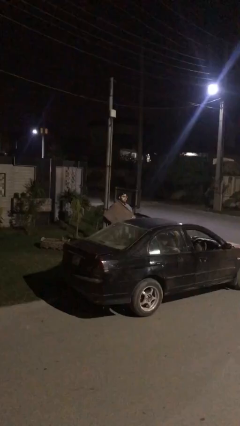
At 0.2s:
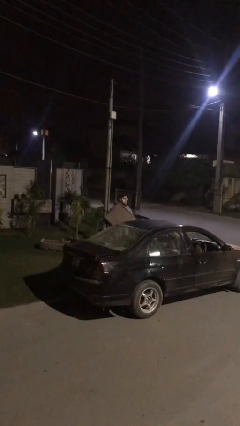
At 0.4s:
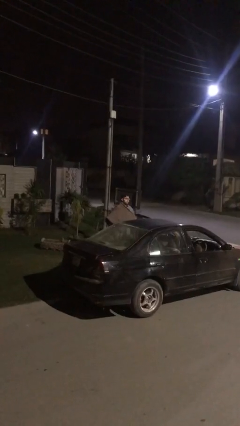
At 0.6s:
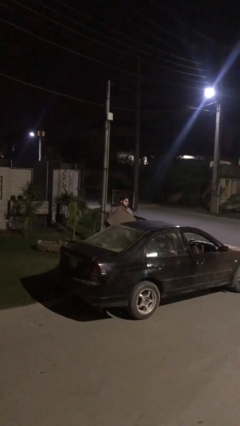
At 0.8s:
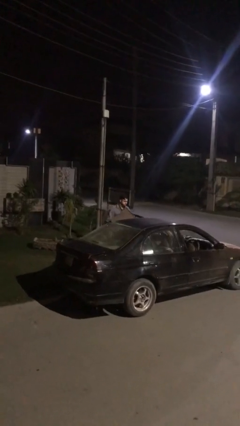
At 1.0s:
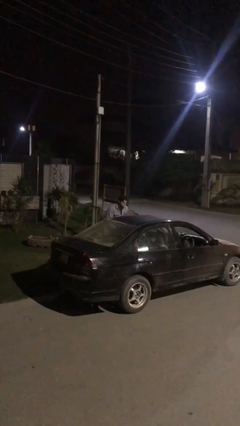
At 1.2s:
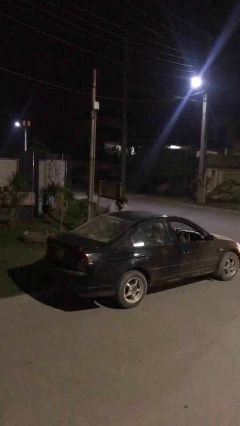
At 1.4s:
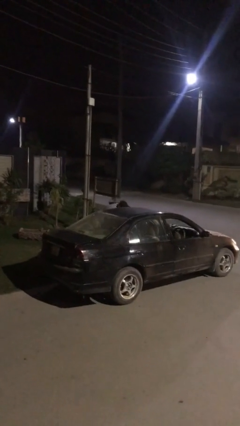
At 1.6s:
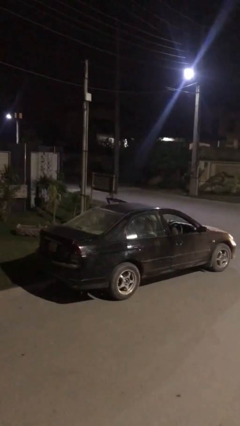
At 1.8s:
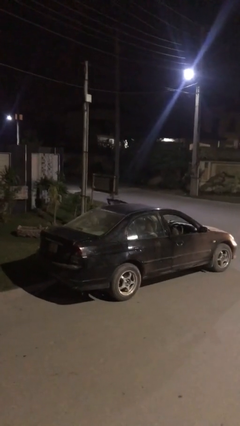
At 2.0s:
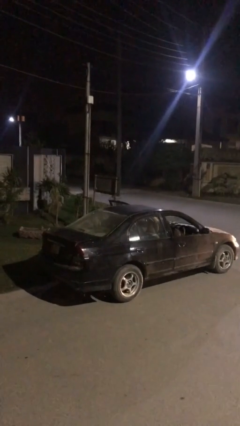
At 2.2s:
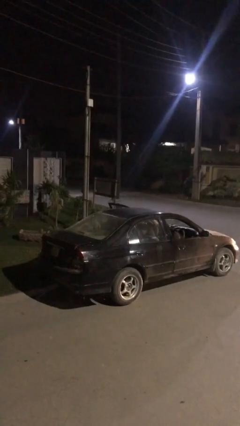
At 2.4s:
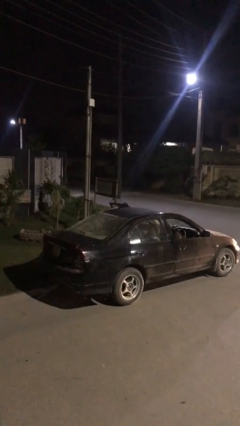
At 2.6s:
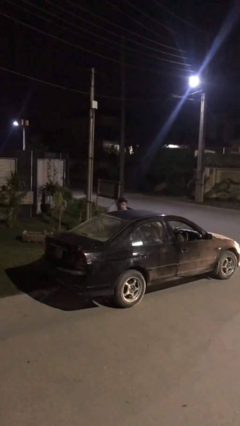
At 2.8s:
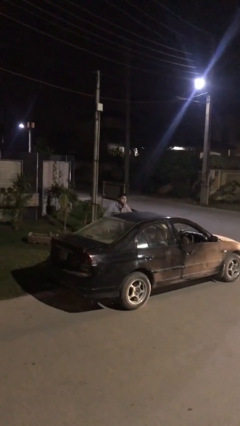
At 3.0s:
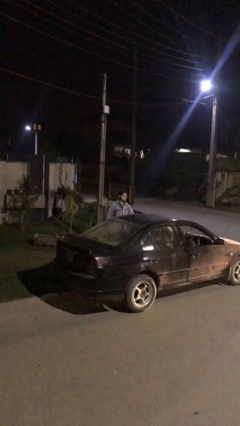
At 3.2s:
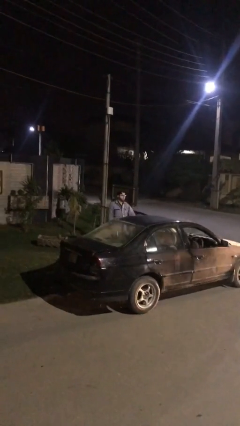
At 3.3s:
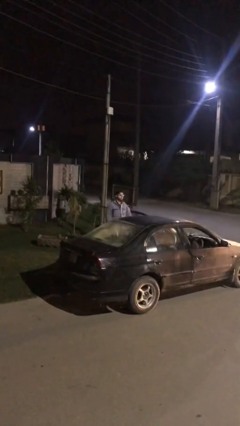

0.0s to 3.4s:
person loads car

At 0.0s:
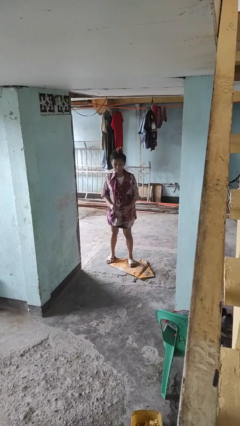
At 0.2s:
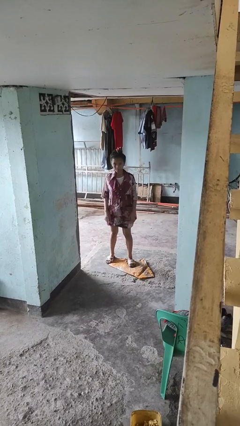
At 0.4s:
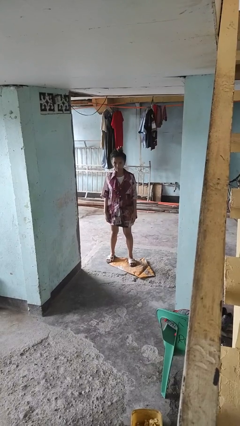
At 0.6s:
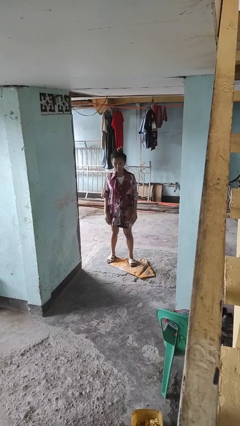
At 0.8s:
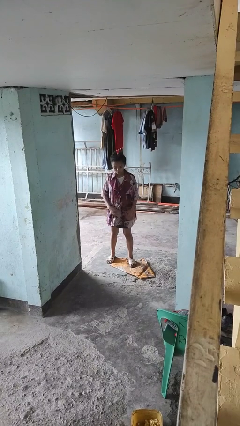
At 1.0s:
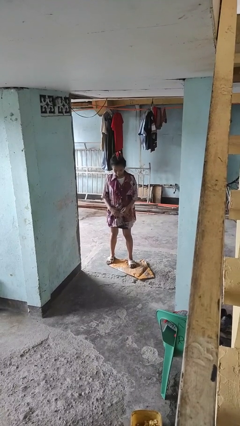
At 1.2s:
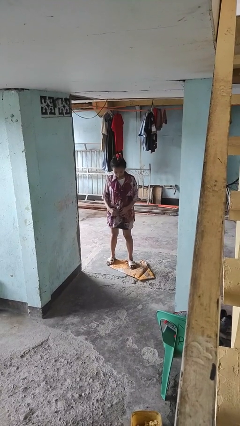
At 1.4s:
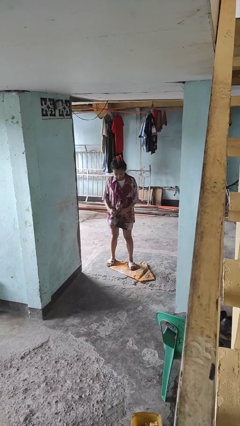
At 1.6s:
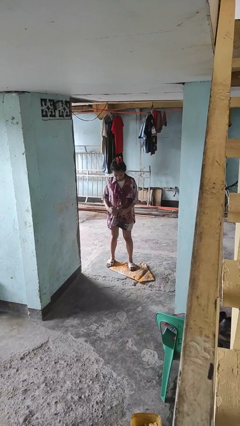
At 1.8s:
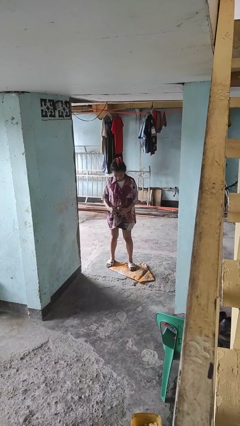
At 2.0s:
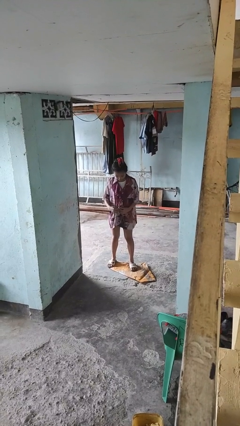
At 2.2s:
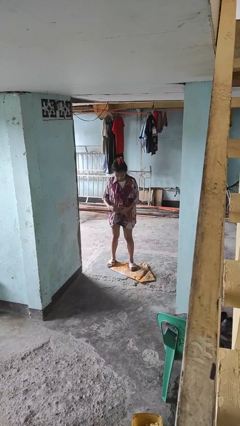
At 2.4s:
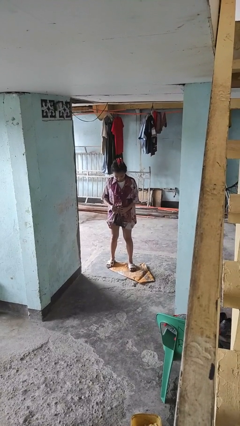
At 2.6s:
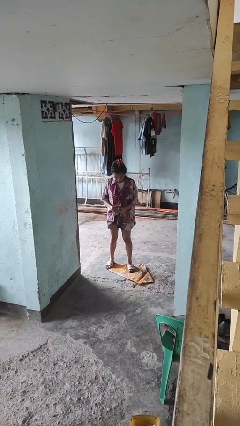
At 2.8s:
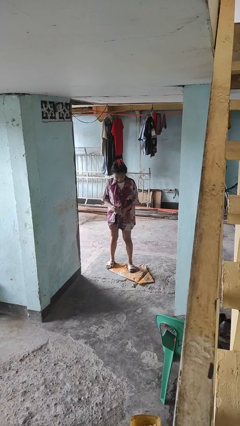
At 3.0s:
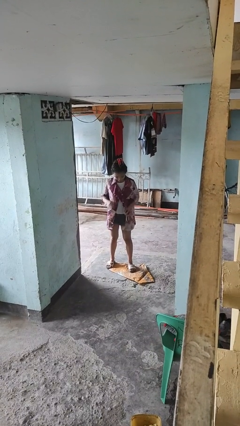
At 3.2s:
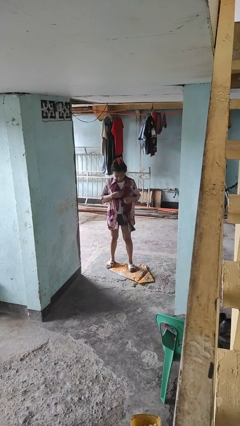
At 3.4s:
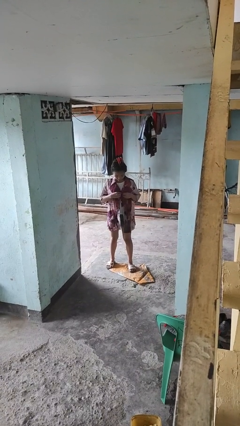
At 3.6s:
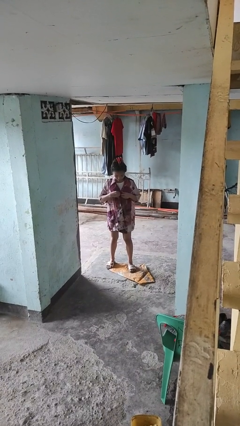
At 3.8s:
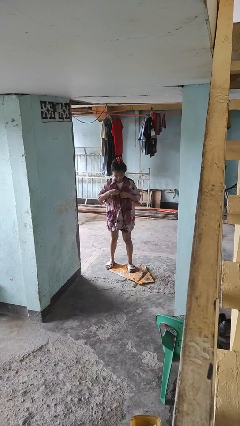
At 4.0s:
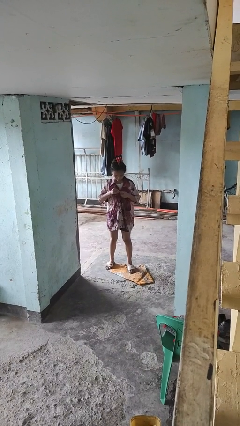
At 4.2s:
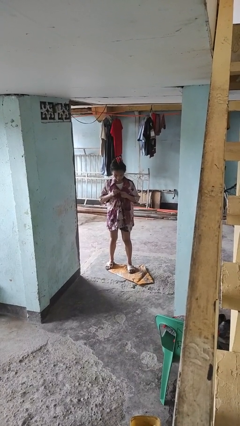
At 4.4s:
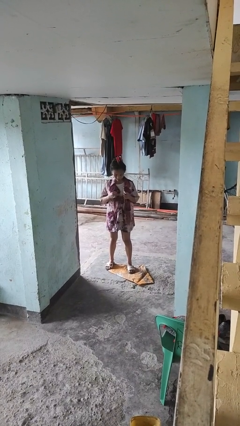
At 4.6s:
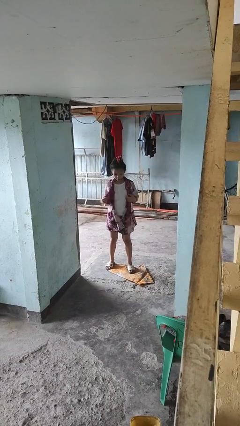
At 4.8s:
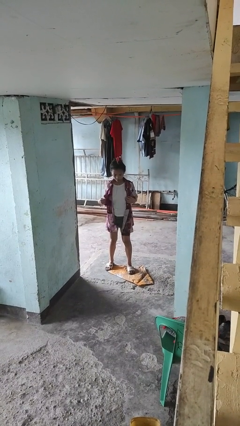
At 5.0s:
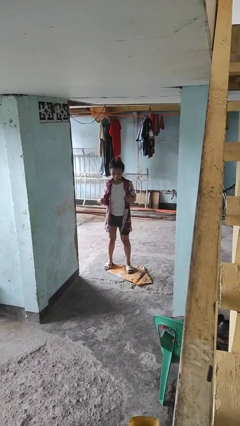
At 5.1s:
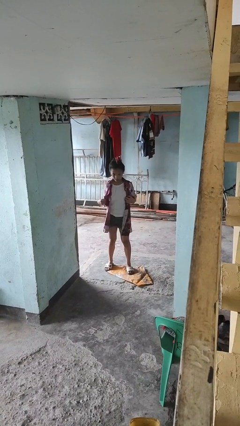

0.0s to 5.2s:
person unbuttons shirt

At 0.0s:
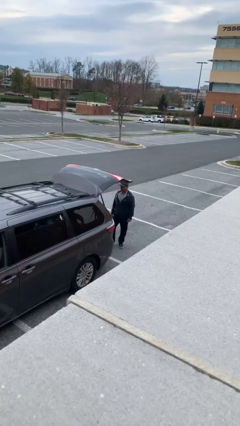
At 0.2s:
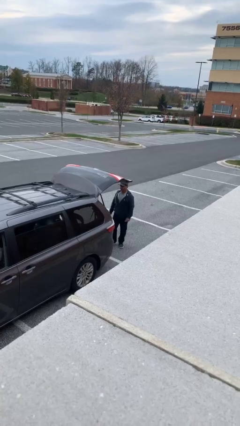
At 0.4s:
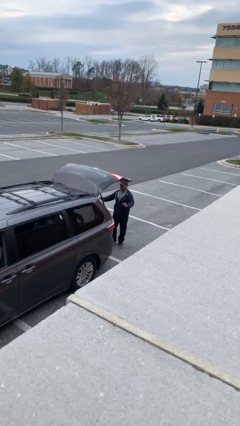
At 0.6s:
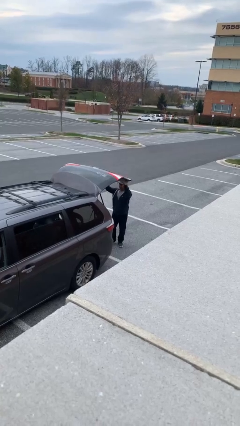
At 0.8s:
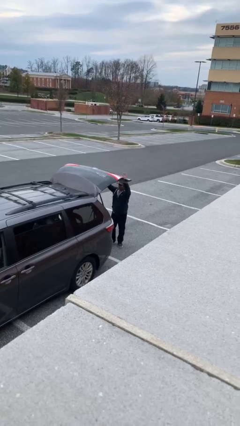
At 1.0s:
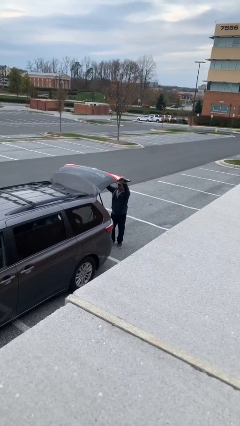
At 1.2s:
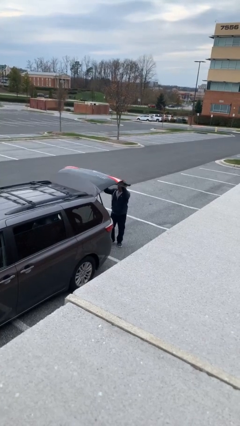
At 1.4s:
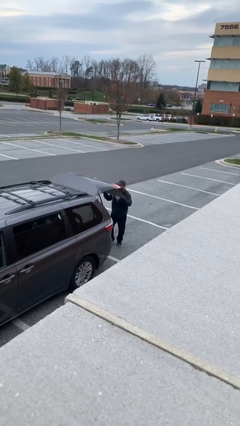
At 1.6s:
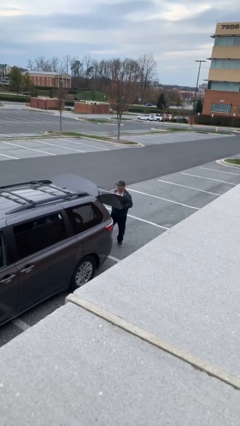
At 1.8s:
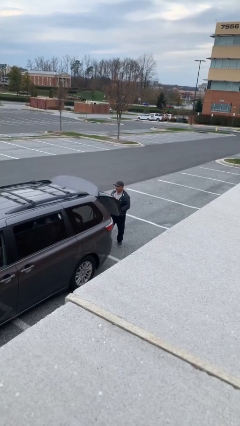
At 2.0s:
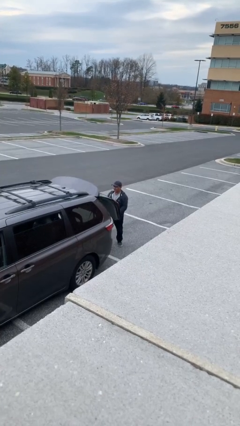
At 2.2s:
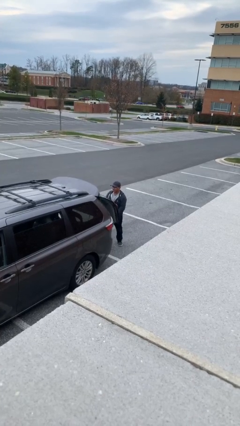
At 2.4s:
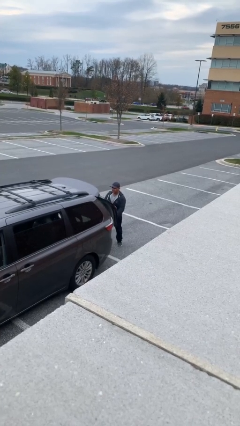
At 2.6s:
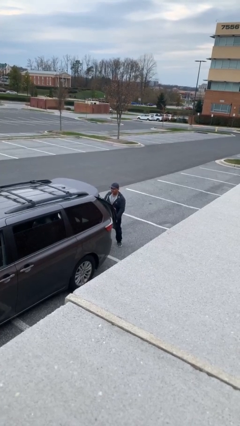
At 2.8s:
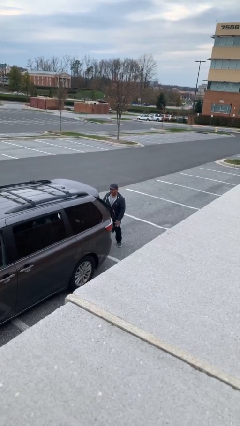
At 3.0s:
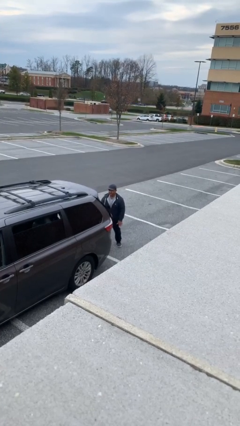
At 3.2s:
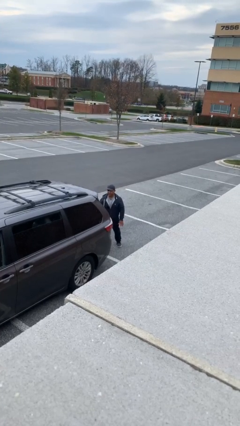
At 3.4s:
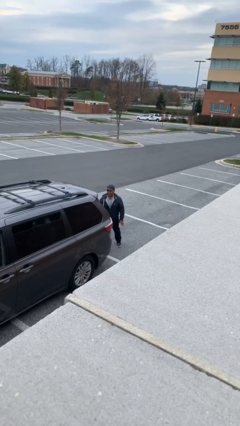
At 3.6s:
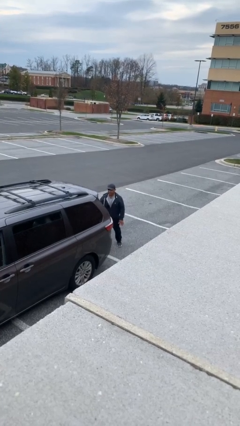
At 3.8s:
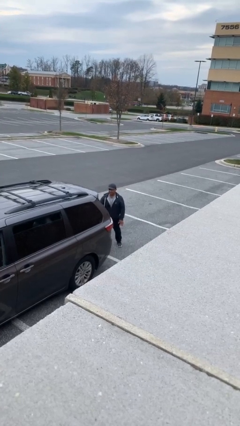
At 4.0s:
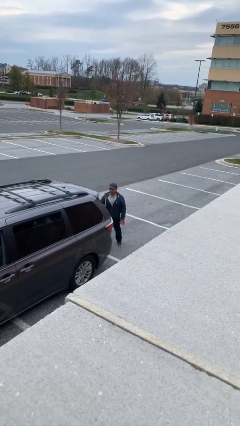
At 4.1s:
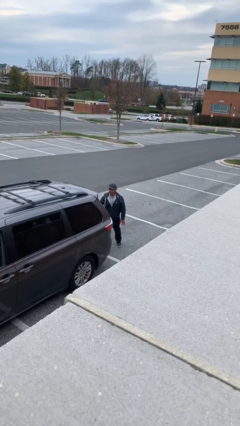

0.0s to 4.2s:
person closes car trunk

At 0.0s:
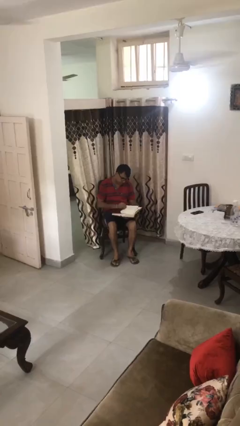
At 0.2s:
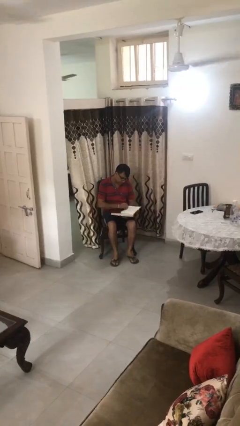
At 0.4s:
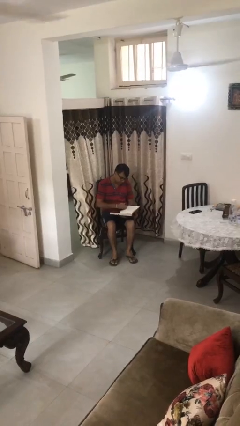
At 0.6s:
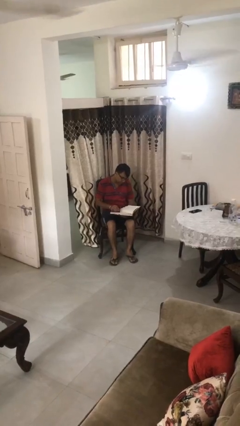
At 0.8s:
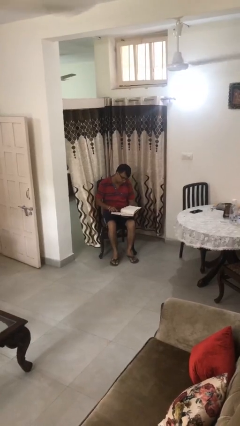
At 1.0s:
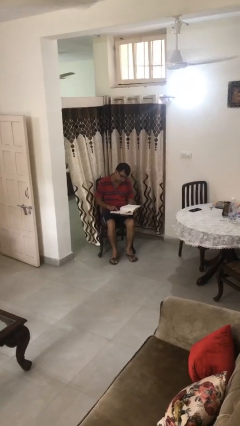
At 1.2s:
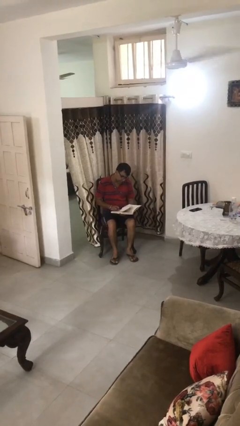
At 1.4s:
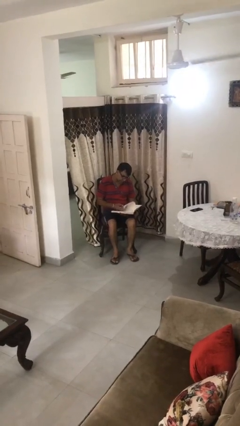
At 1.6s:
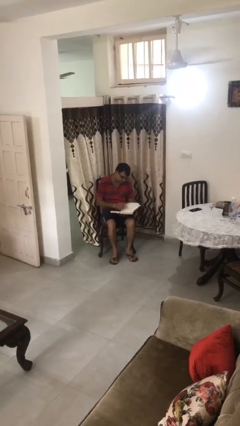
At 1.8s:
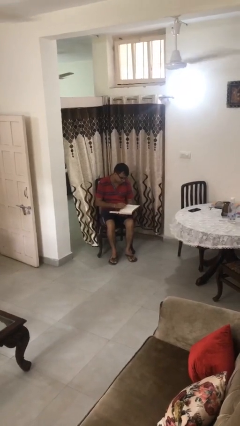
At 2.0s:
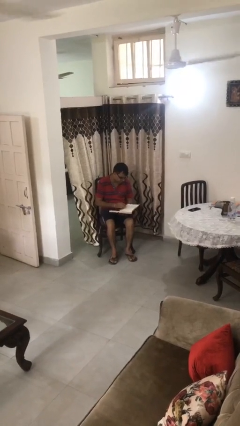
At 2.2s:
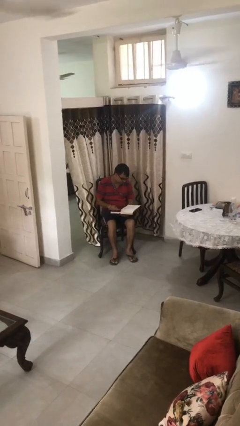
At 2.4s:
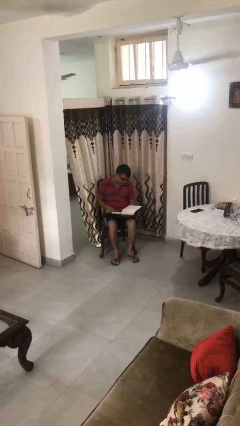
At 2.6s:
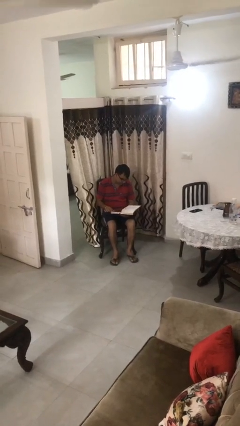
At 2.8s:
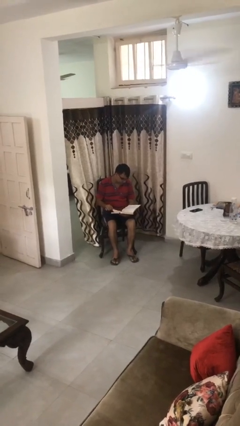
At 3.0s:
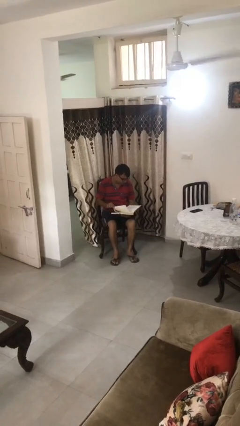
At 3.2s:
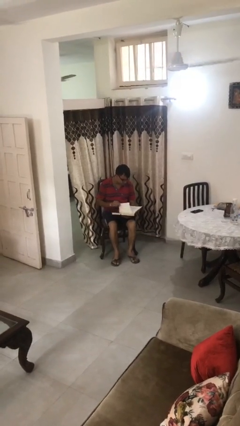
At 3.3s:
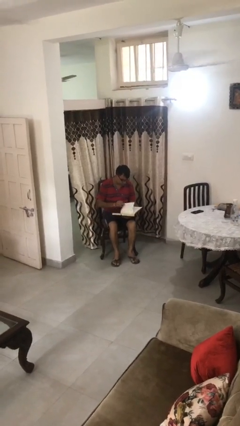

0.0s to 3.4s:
person reads document

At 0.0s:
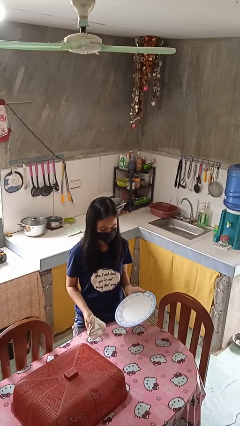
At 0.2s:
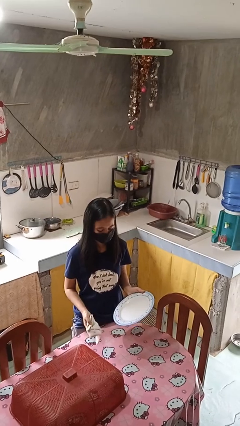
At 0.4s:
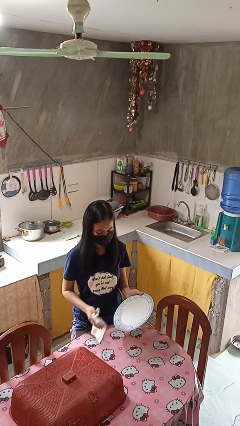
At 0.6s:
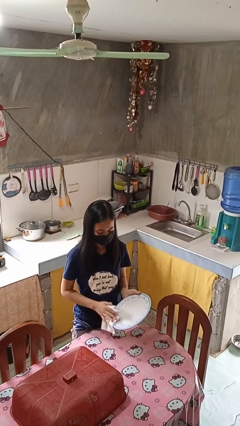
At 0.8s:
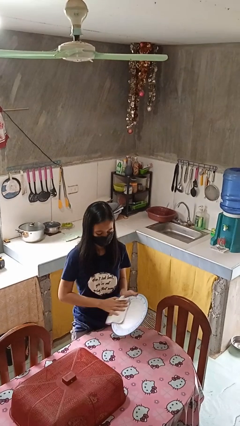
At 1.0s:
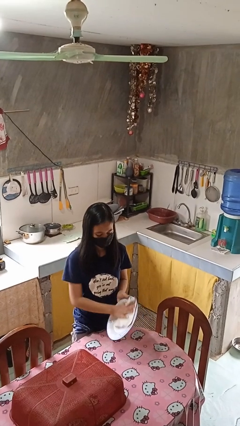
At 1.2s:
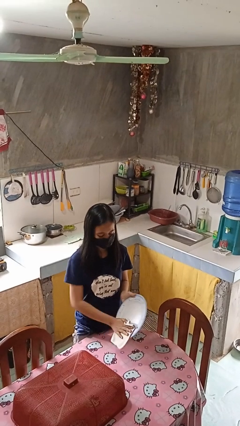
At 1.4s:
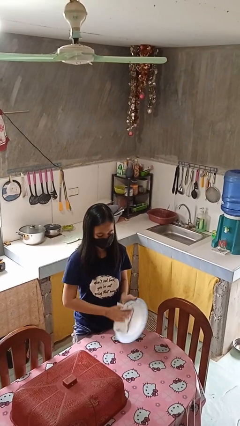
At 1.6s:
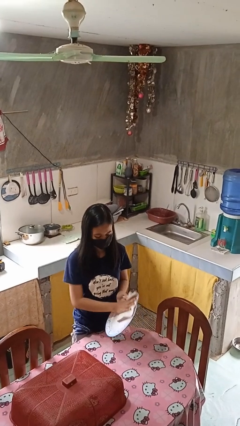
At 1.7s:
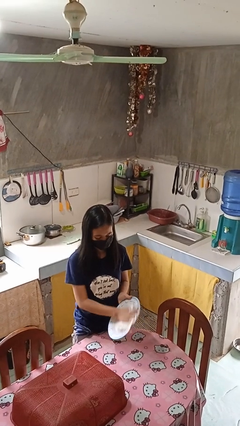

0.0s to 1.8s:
person dries dish
